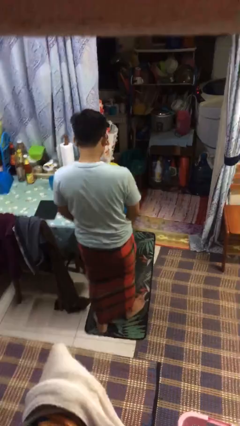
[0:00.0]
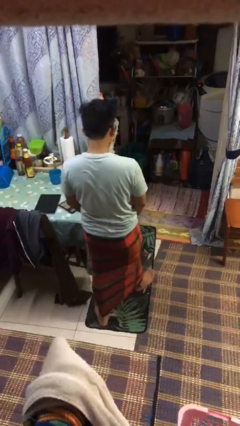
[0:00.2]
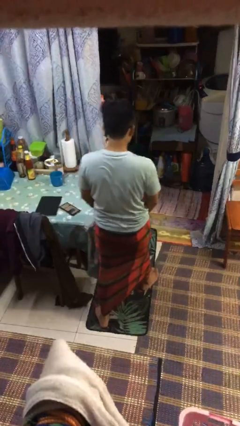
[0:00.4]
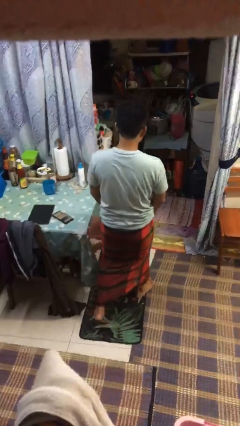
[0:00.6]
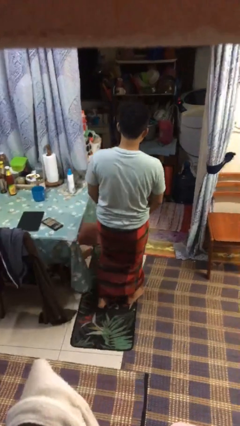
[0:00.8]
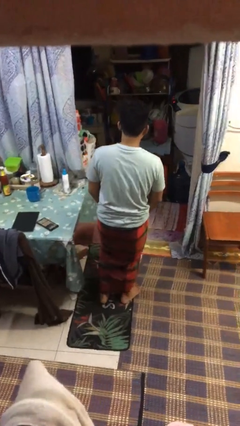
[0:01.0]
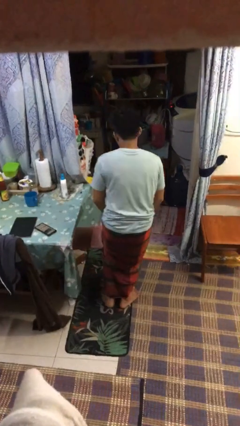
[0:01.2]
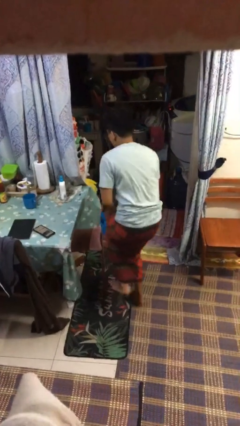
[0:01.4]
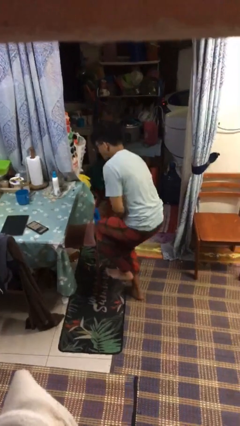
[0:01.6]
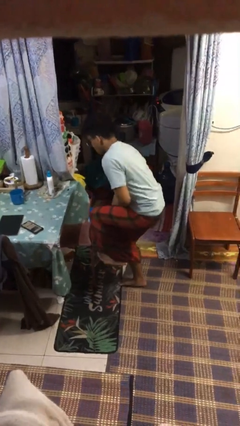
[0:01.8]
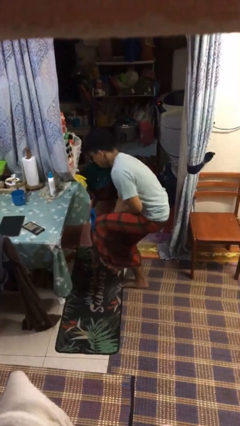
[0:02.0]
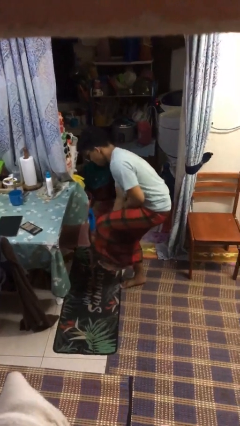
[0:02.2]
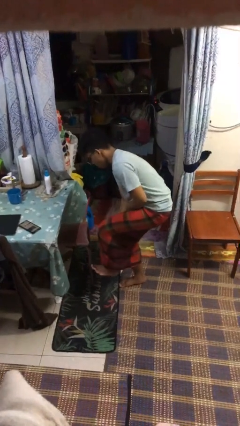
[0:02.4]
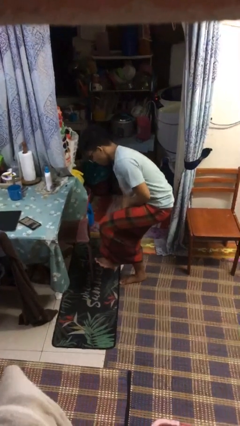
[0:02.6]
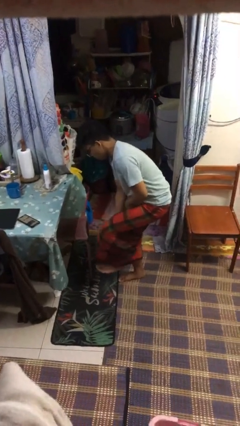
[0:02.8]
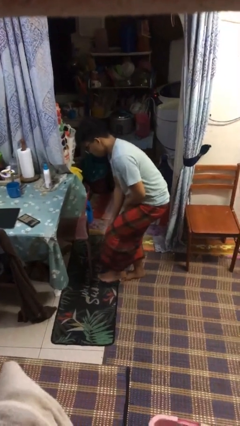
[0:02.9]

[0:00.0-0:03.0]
person stubs toe

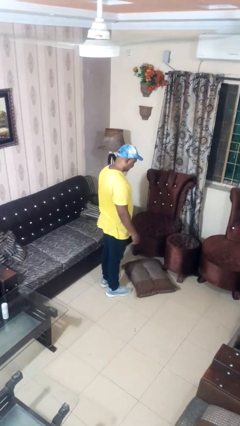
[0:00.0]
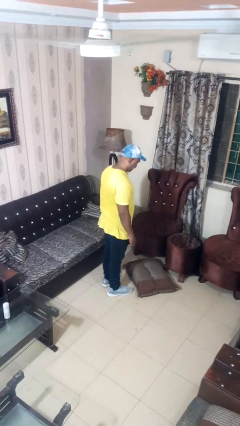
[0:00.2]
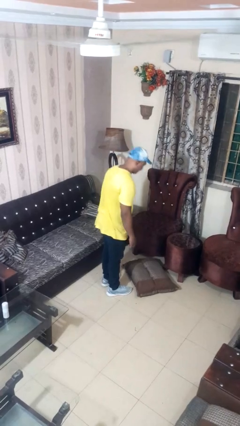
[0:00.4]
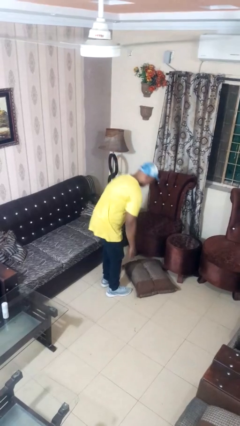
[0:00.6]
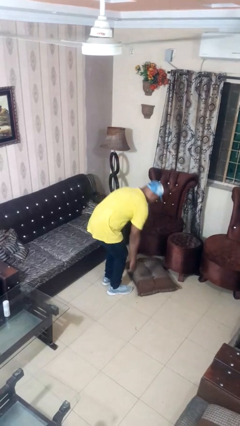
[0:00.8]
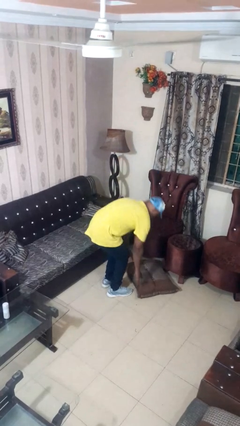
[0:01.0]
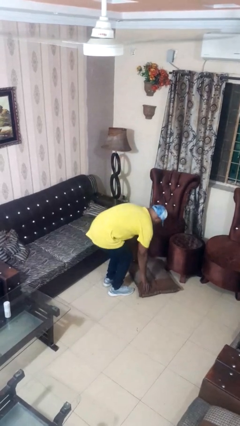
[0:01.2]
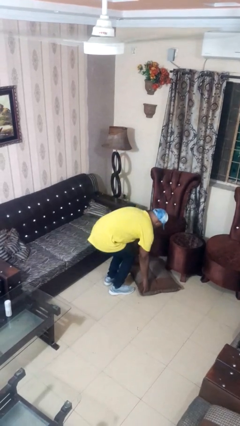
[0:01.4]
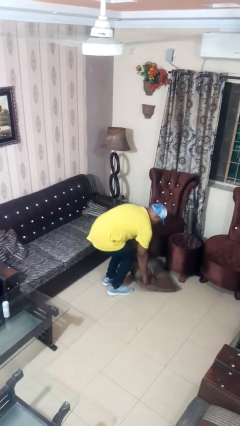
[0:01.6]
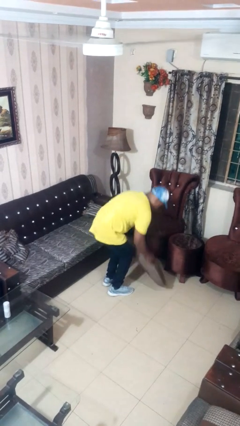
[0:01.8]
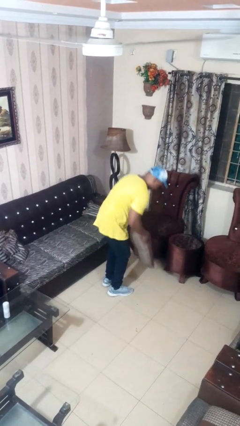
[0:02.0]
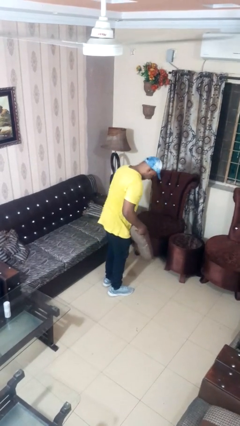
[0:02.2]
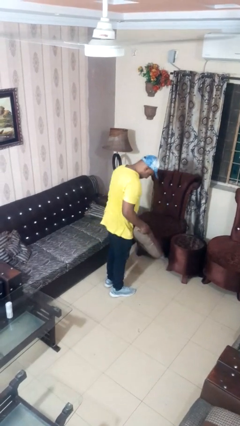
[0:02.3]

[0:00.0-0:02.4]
person picks up object from floor

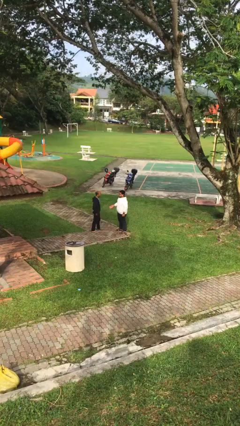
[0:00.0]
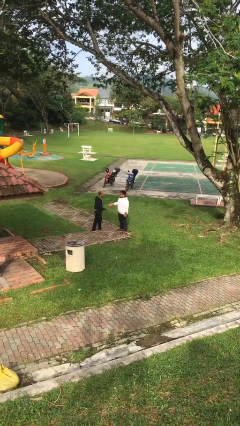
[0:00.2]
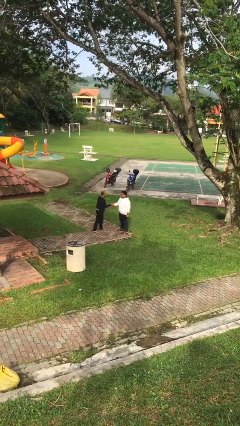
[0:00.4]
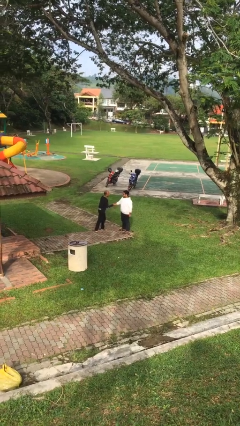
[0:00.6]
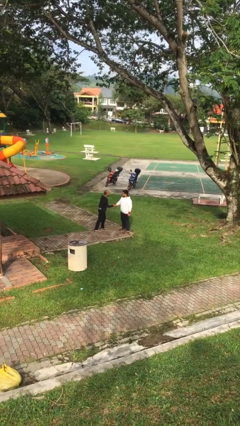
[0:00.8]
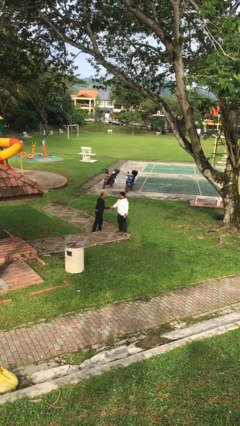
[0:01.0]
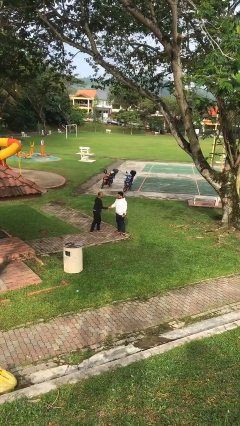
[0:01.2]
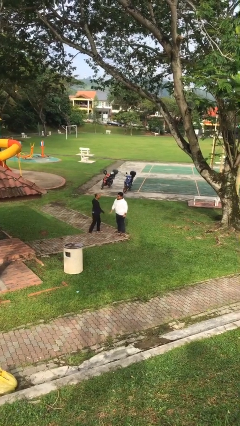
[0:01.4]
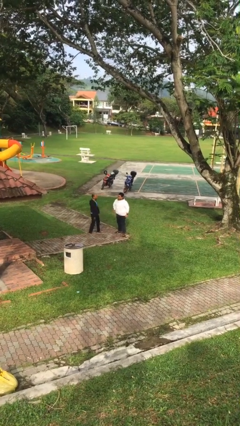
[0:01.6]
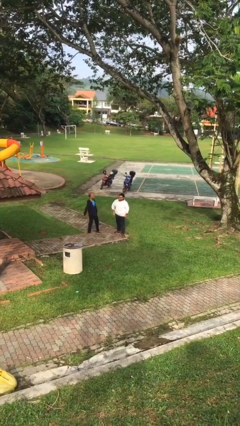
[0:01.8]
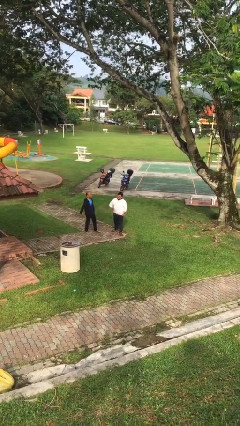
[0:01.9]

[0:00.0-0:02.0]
person shakes hand

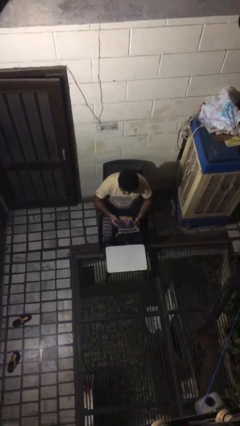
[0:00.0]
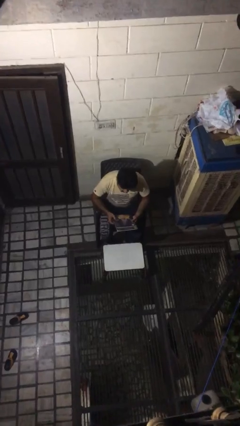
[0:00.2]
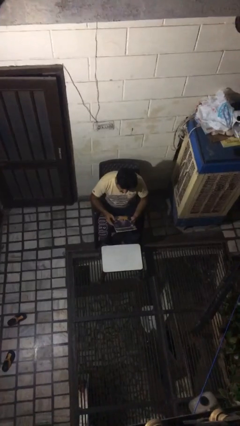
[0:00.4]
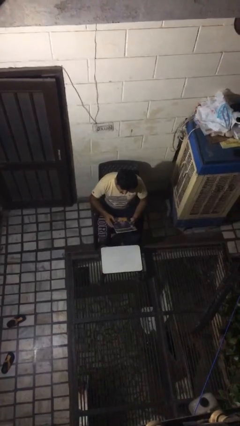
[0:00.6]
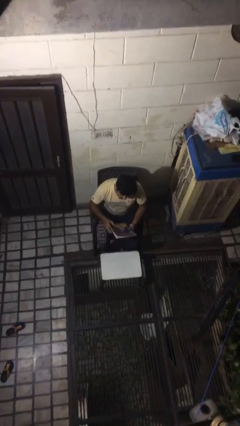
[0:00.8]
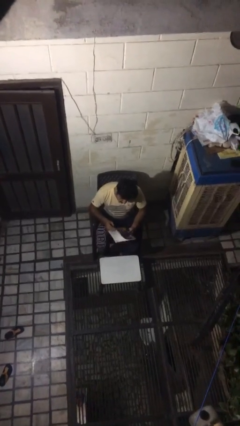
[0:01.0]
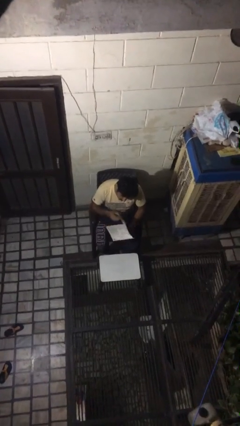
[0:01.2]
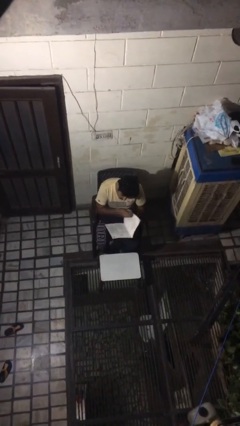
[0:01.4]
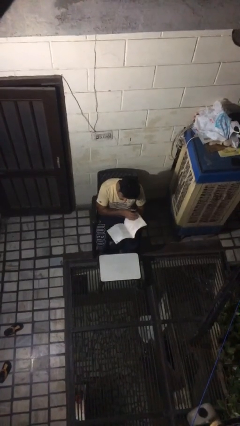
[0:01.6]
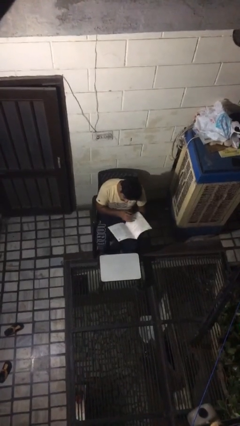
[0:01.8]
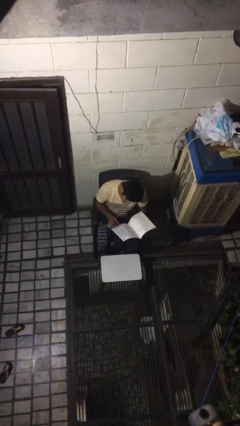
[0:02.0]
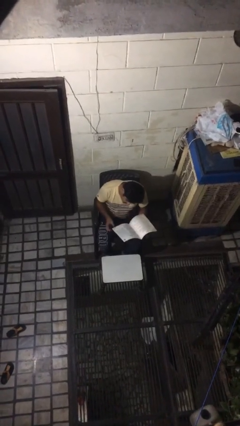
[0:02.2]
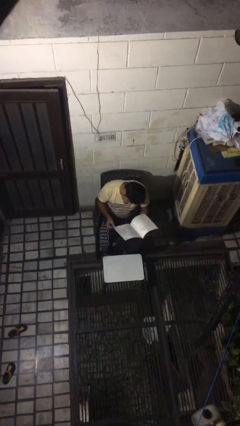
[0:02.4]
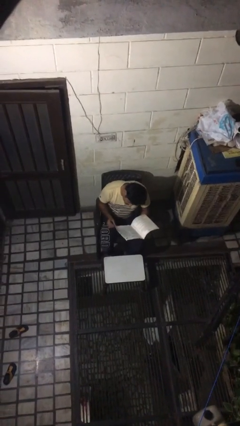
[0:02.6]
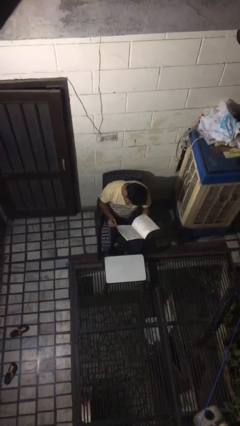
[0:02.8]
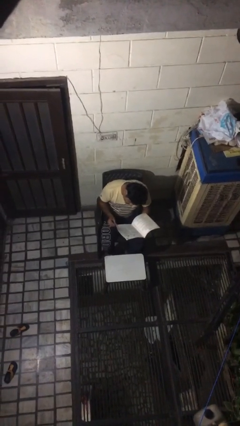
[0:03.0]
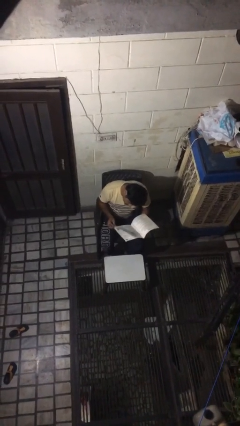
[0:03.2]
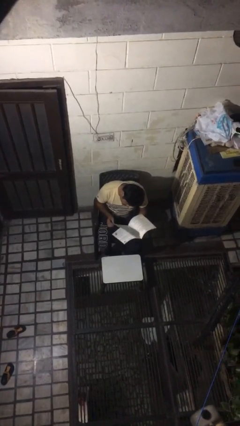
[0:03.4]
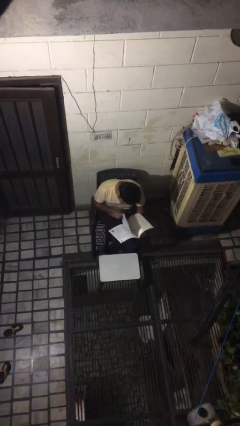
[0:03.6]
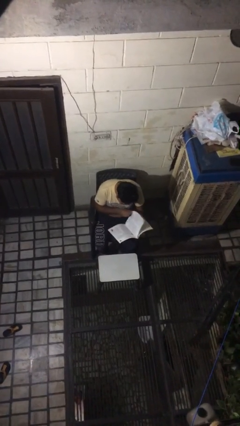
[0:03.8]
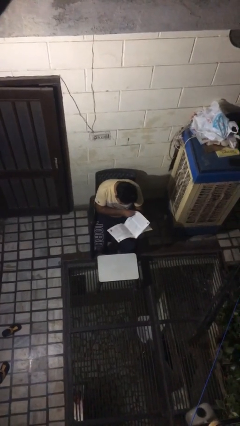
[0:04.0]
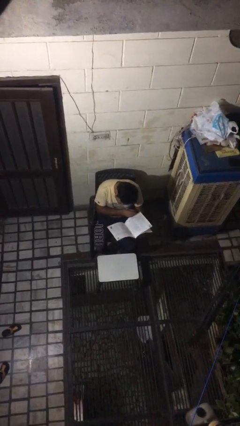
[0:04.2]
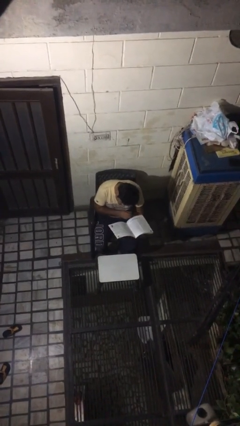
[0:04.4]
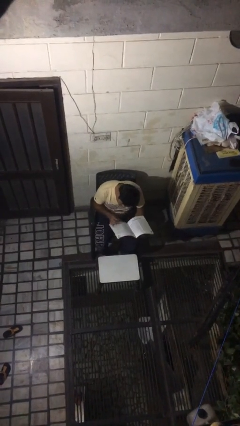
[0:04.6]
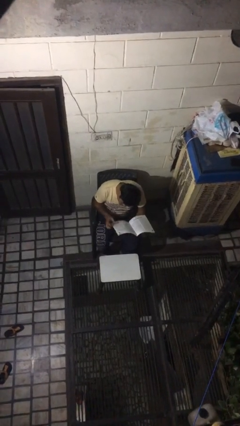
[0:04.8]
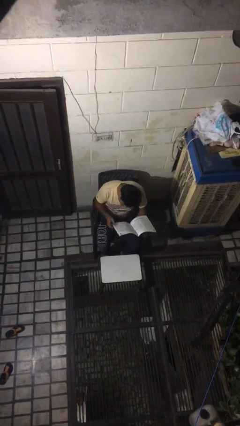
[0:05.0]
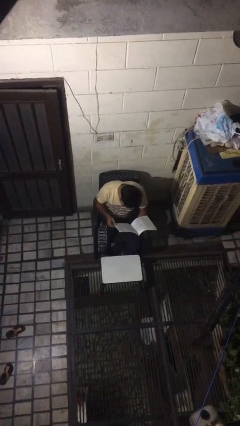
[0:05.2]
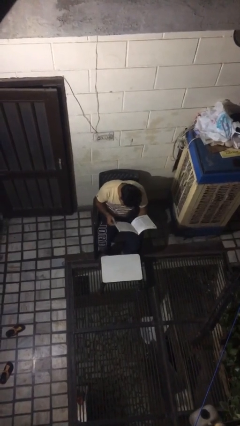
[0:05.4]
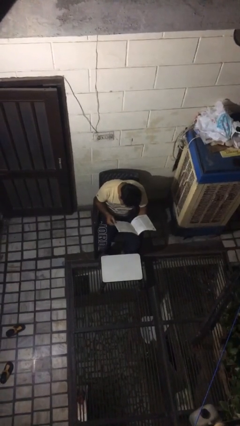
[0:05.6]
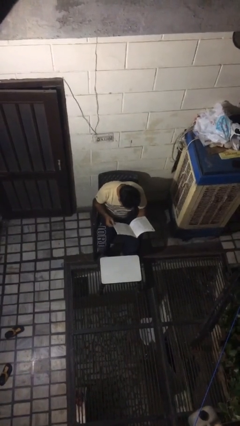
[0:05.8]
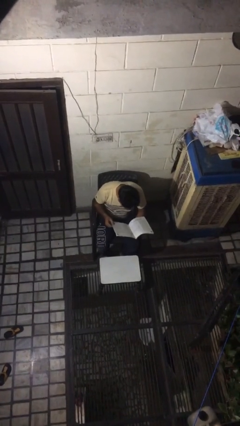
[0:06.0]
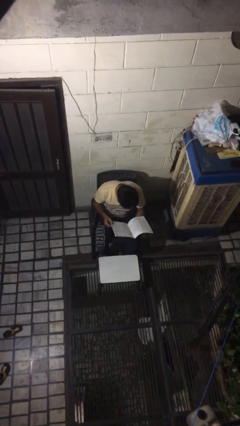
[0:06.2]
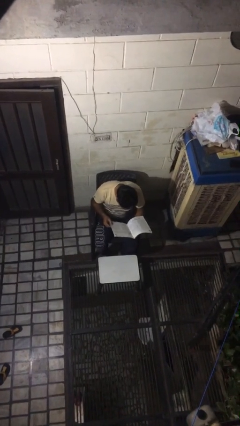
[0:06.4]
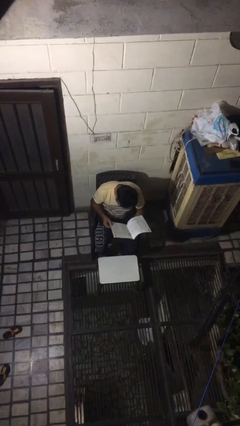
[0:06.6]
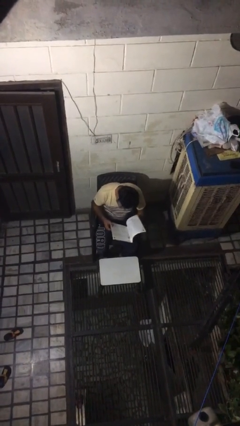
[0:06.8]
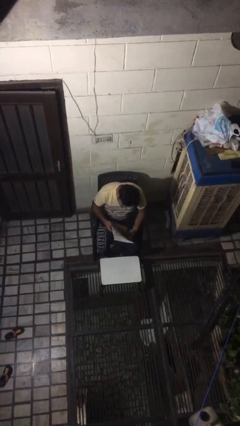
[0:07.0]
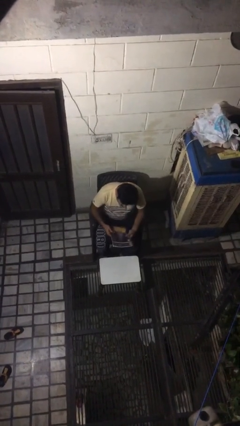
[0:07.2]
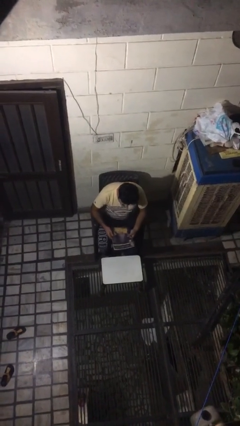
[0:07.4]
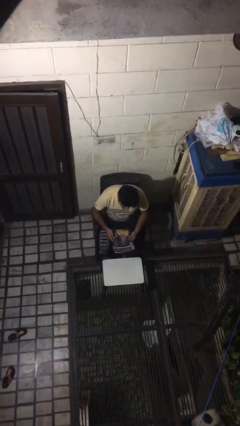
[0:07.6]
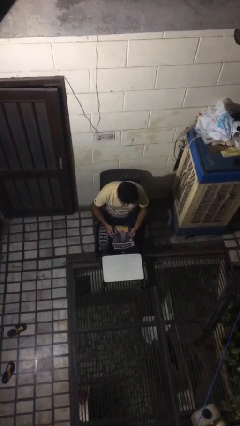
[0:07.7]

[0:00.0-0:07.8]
person reads magazine

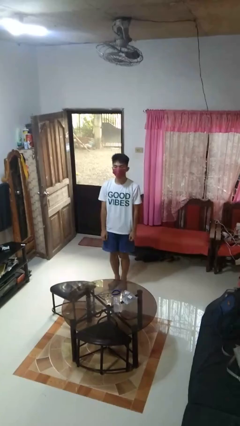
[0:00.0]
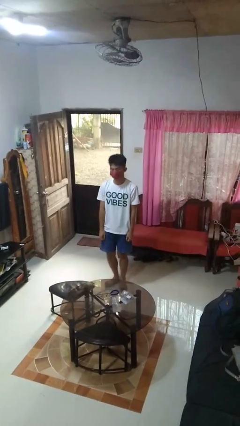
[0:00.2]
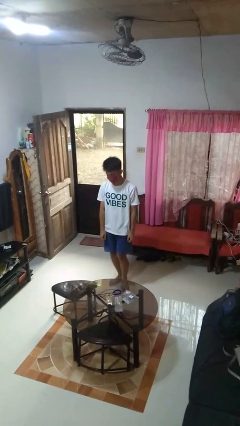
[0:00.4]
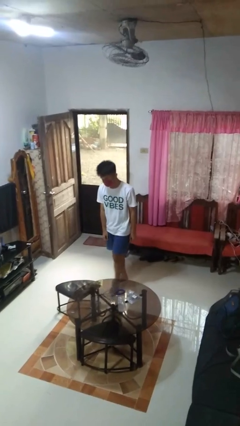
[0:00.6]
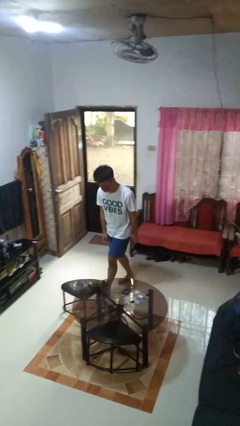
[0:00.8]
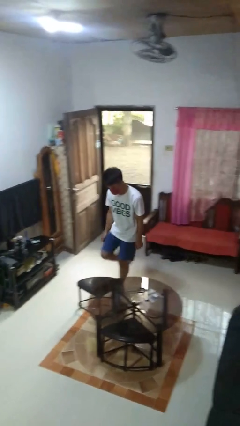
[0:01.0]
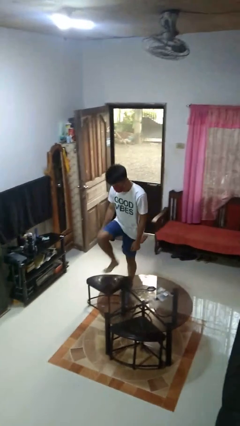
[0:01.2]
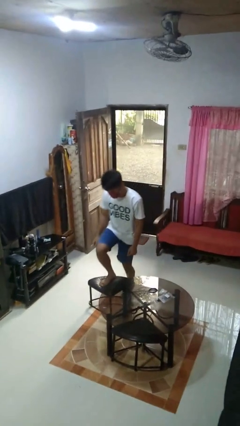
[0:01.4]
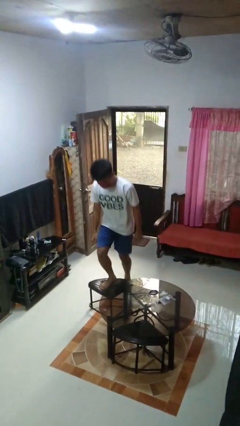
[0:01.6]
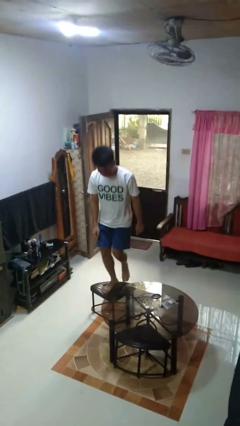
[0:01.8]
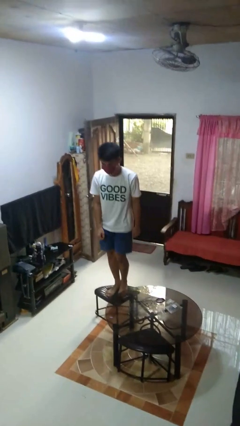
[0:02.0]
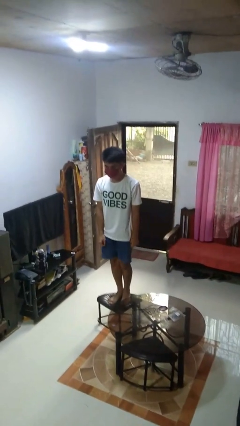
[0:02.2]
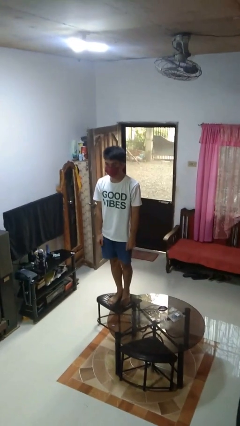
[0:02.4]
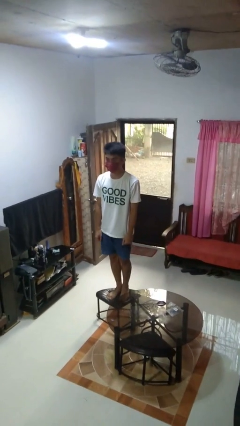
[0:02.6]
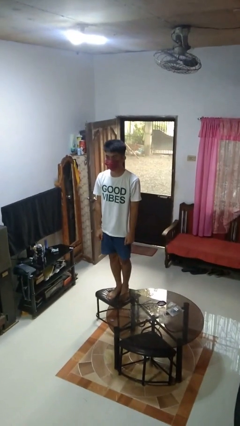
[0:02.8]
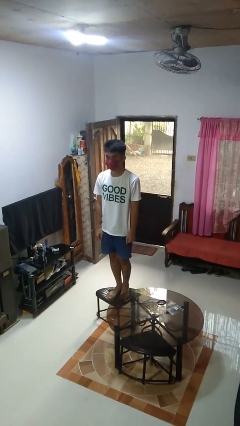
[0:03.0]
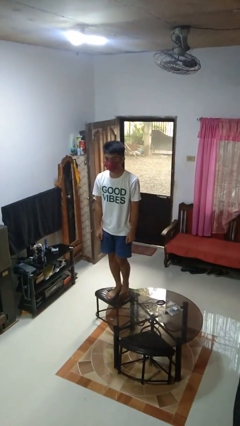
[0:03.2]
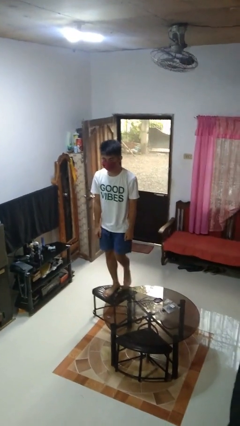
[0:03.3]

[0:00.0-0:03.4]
person climbs on chair
